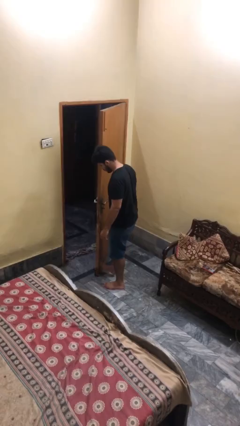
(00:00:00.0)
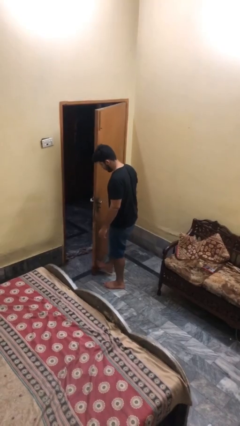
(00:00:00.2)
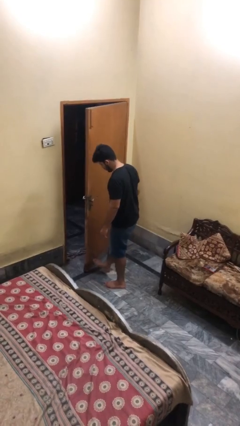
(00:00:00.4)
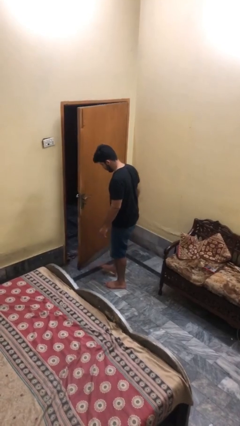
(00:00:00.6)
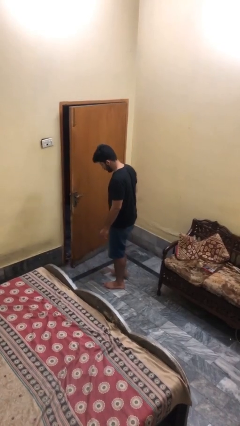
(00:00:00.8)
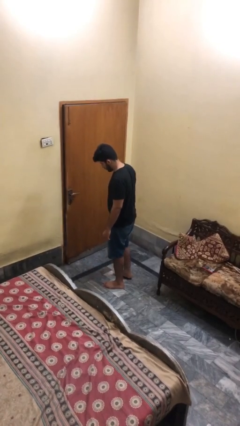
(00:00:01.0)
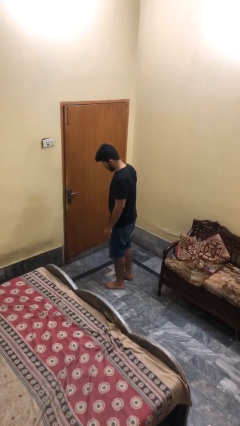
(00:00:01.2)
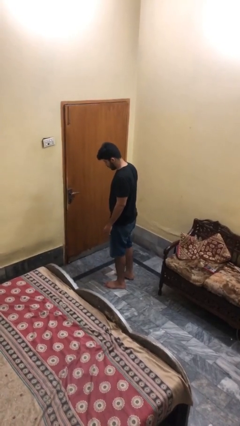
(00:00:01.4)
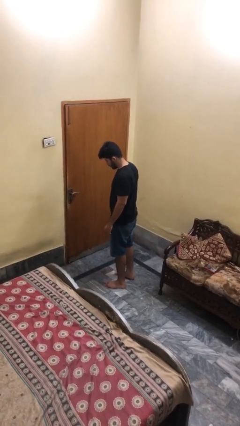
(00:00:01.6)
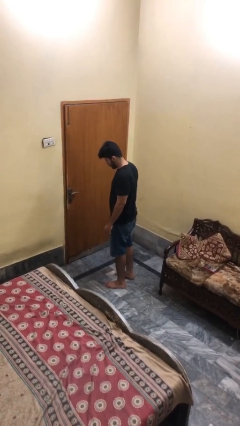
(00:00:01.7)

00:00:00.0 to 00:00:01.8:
person closes door with foot

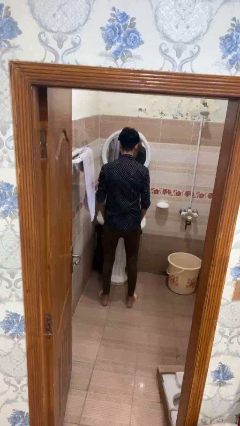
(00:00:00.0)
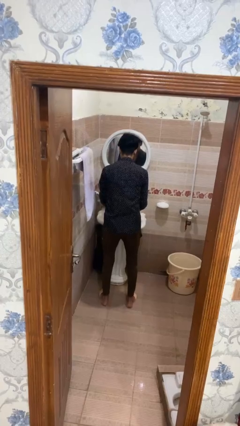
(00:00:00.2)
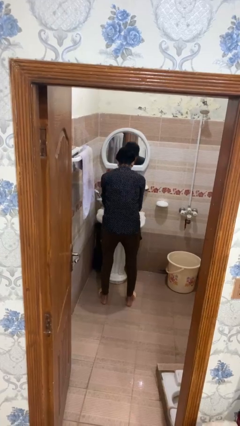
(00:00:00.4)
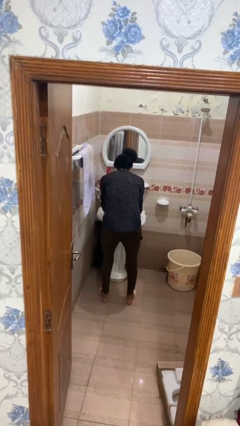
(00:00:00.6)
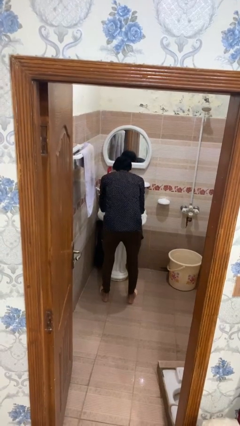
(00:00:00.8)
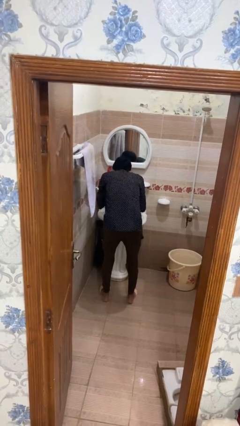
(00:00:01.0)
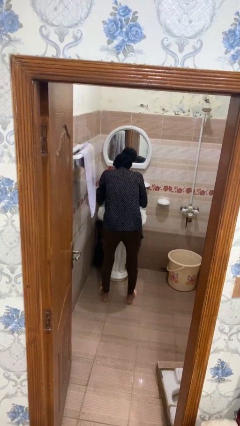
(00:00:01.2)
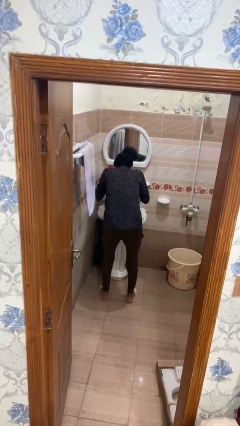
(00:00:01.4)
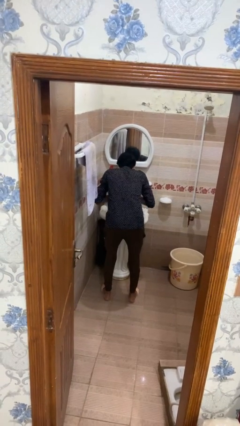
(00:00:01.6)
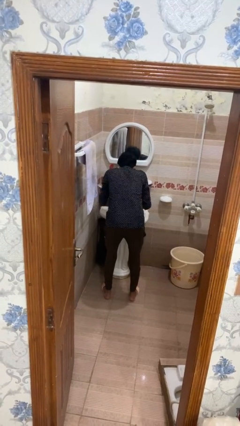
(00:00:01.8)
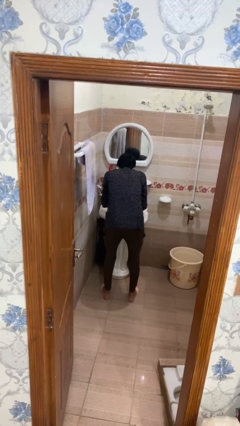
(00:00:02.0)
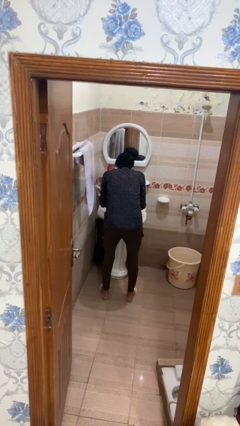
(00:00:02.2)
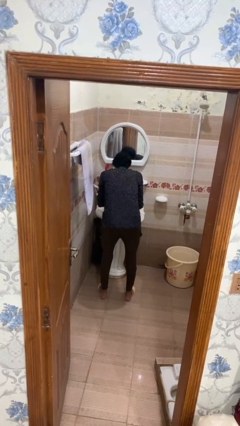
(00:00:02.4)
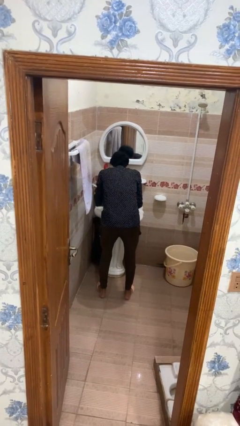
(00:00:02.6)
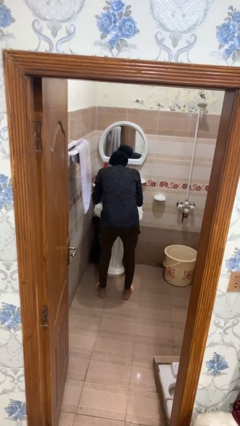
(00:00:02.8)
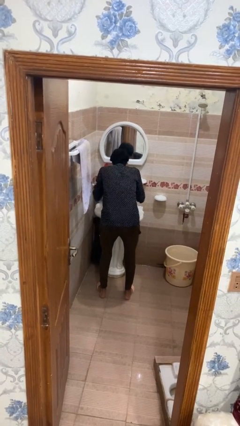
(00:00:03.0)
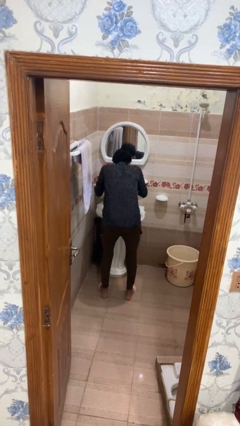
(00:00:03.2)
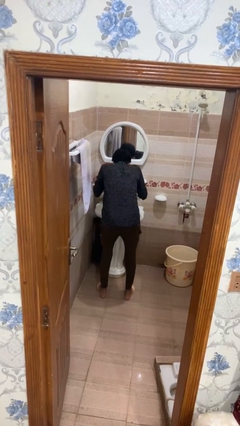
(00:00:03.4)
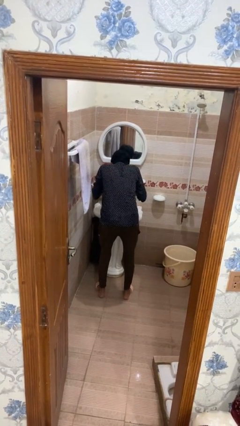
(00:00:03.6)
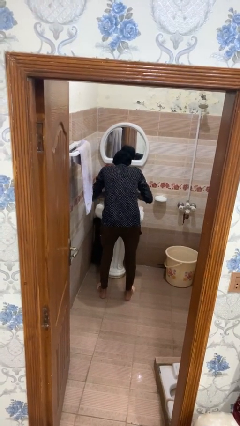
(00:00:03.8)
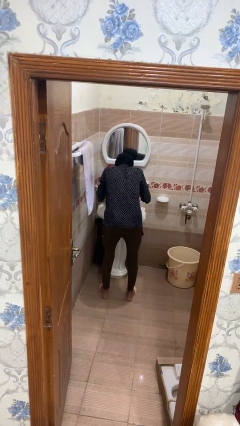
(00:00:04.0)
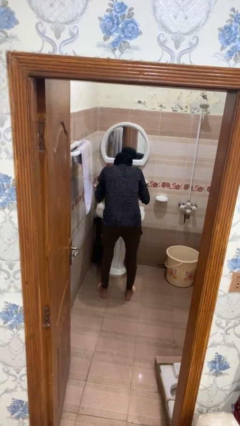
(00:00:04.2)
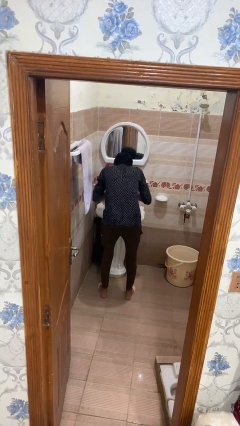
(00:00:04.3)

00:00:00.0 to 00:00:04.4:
person washes face

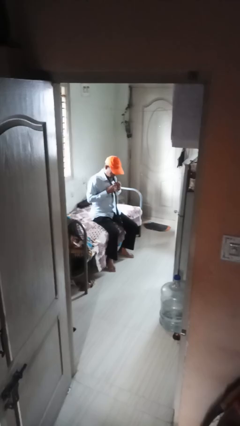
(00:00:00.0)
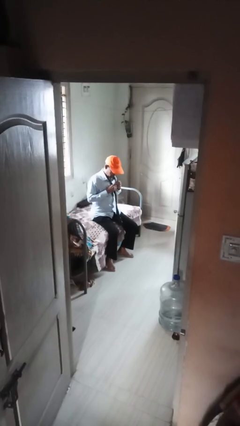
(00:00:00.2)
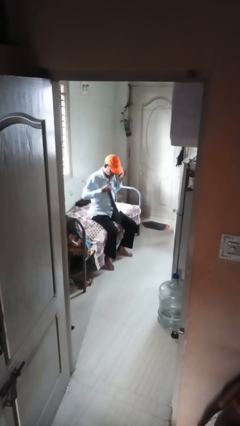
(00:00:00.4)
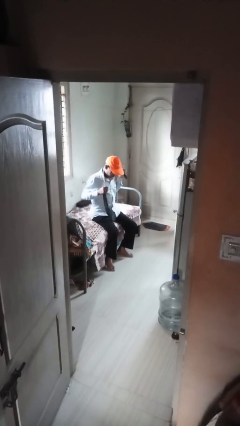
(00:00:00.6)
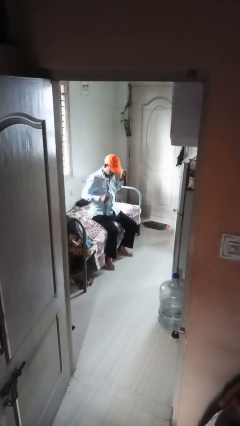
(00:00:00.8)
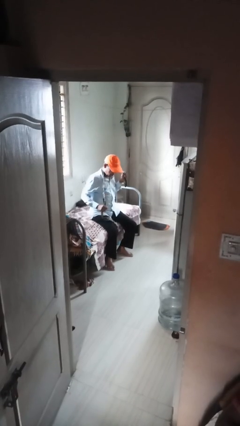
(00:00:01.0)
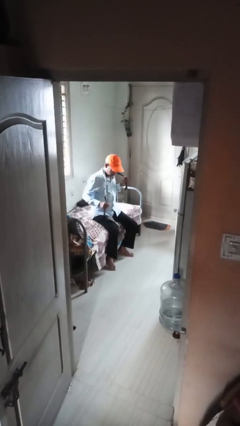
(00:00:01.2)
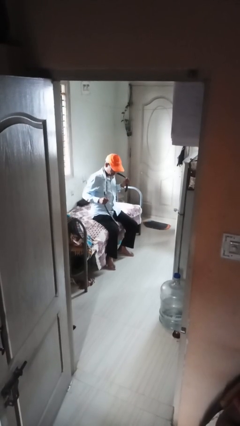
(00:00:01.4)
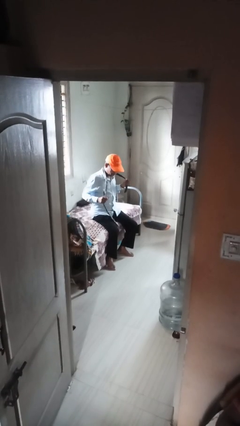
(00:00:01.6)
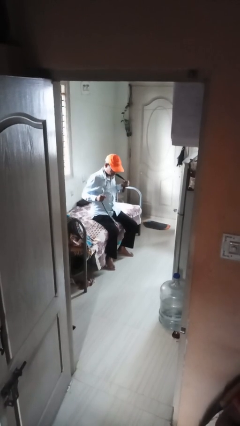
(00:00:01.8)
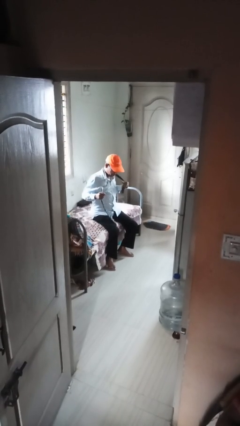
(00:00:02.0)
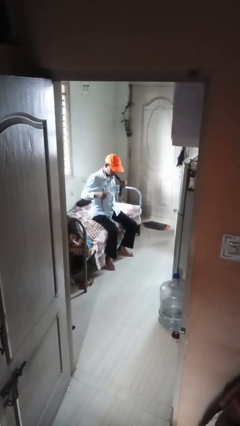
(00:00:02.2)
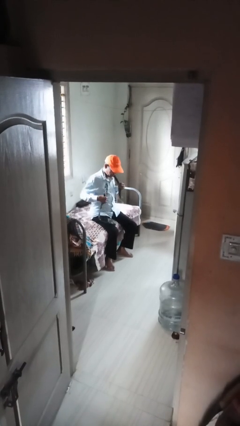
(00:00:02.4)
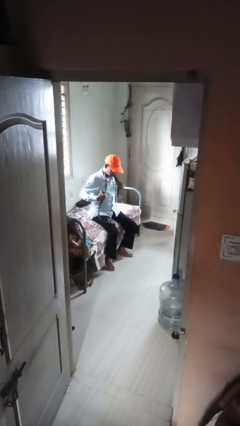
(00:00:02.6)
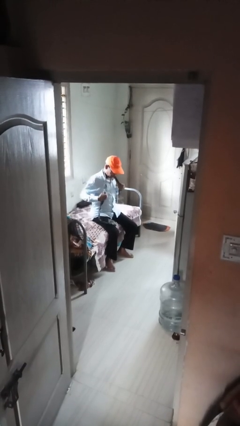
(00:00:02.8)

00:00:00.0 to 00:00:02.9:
person takes off necktie

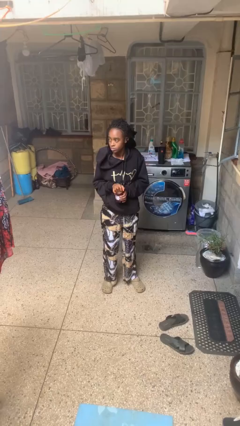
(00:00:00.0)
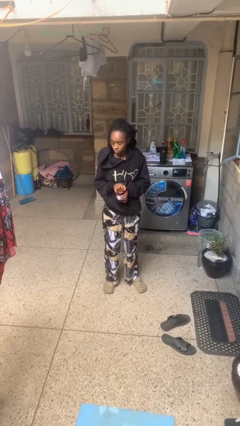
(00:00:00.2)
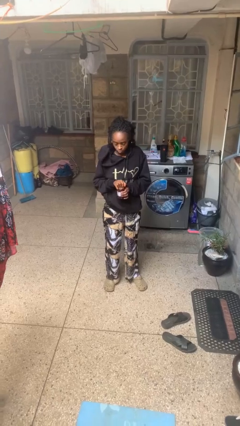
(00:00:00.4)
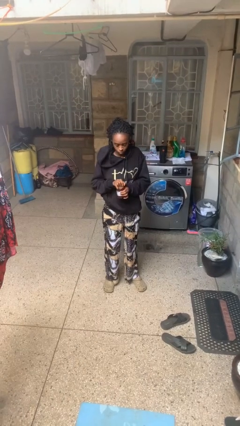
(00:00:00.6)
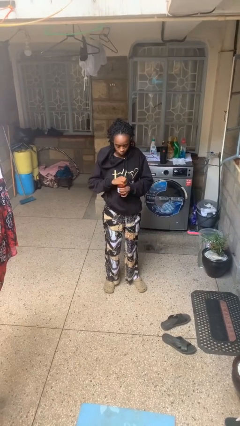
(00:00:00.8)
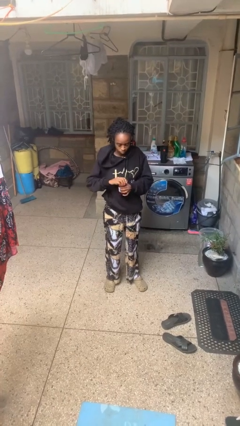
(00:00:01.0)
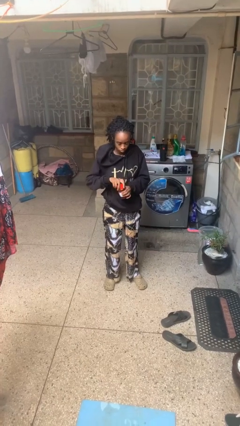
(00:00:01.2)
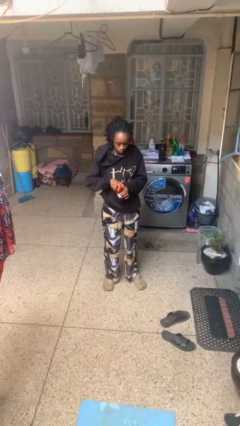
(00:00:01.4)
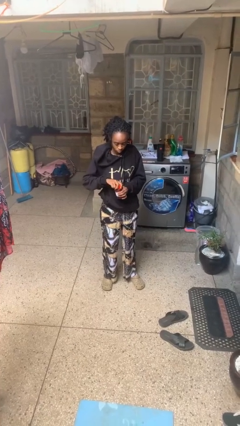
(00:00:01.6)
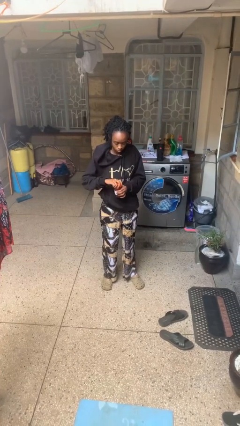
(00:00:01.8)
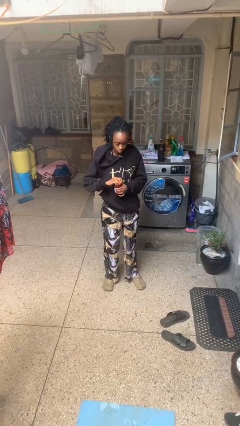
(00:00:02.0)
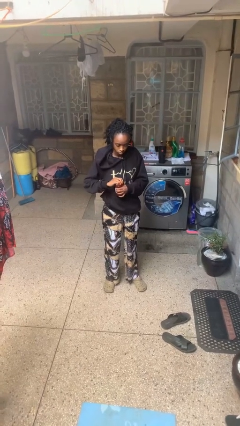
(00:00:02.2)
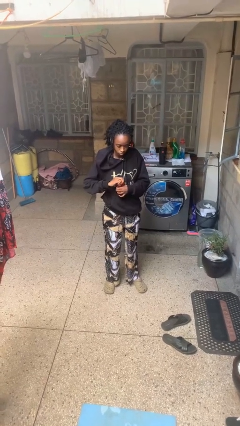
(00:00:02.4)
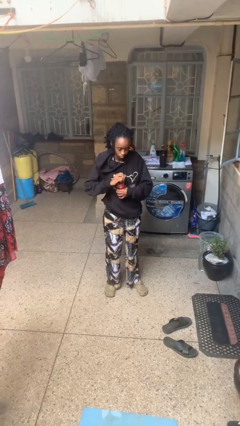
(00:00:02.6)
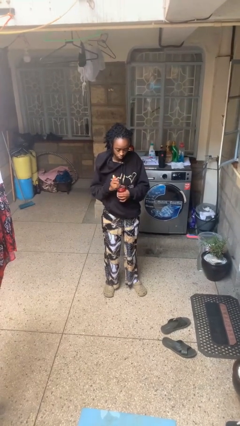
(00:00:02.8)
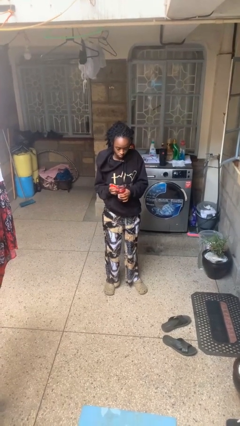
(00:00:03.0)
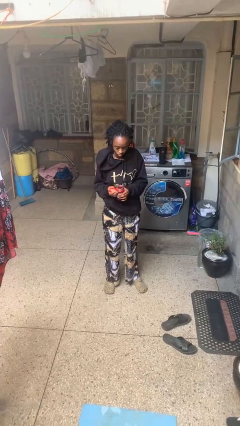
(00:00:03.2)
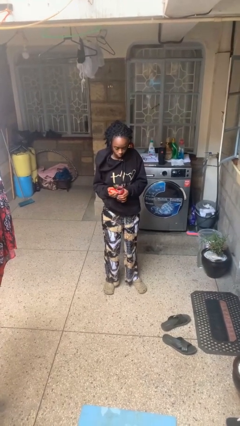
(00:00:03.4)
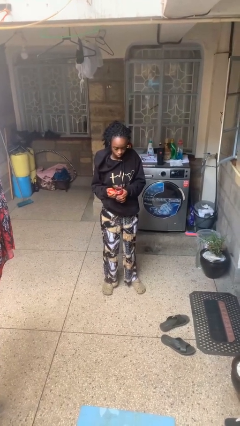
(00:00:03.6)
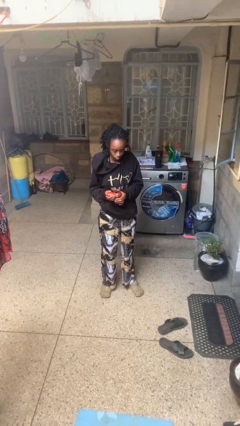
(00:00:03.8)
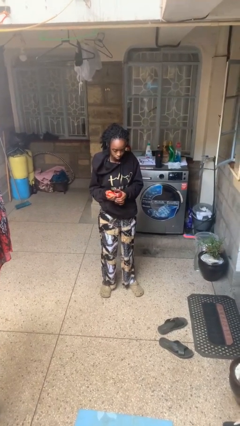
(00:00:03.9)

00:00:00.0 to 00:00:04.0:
person opens jar

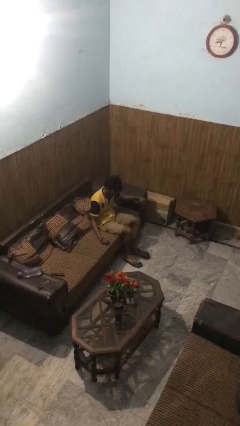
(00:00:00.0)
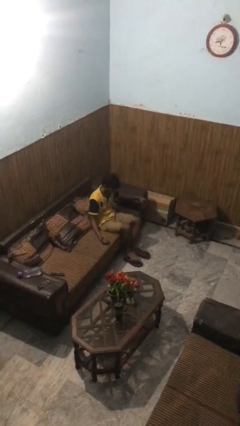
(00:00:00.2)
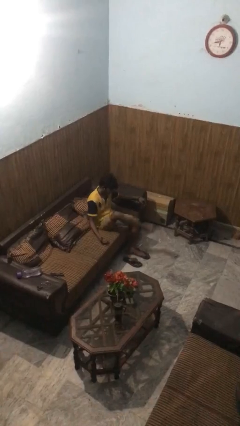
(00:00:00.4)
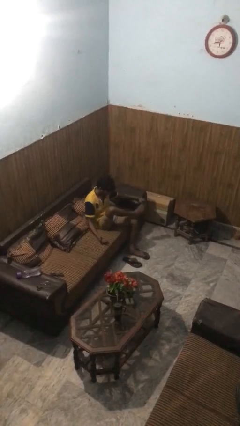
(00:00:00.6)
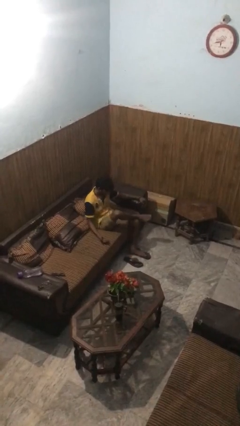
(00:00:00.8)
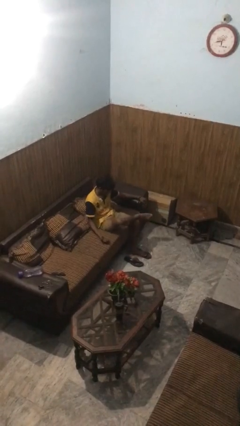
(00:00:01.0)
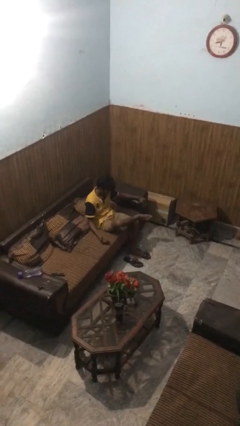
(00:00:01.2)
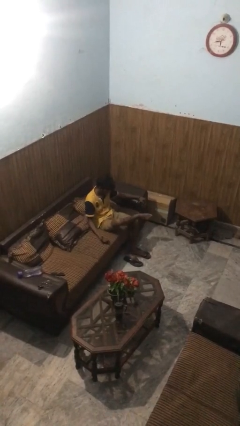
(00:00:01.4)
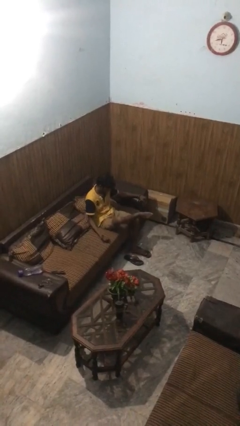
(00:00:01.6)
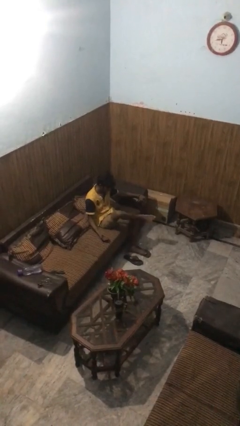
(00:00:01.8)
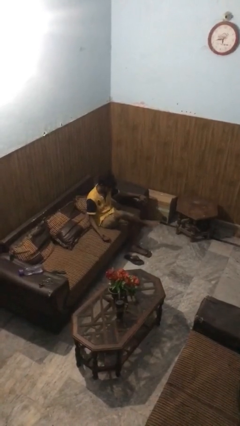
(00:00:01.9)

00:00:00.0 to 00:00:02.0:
person crosses legs

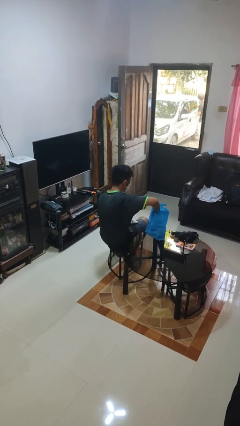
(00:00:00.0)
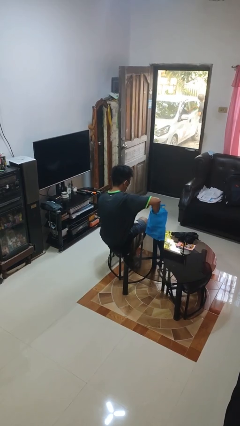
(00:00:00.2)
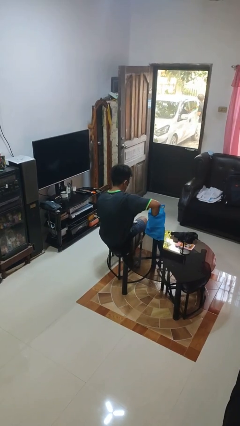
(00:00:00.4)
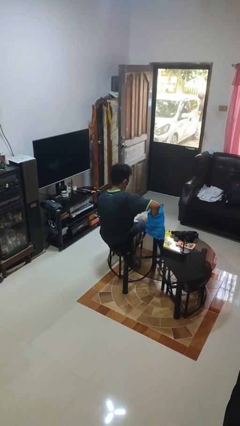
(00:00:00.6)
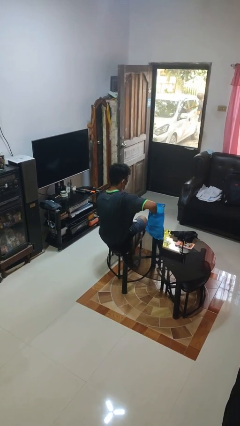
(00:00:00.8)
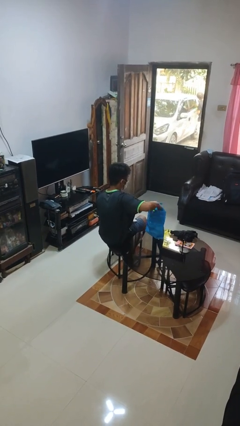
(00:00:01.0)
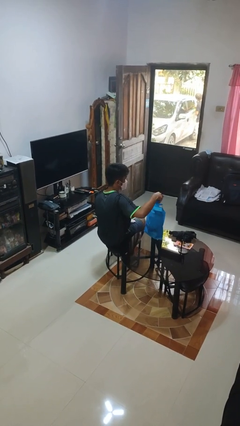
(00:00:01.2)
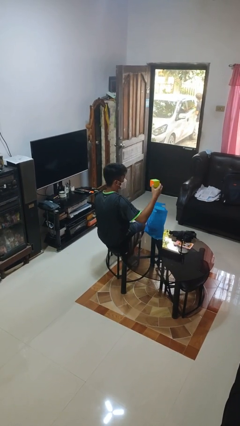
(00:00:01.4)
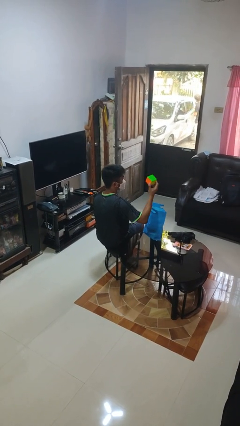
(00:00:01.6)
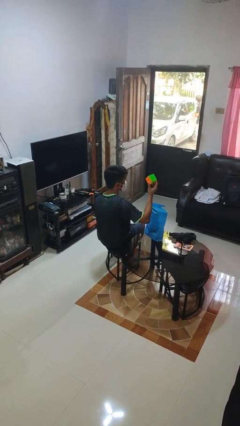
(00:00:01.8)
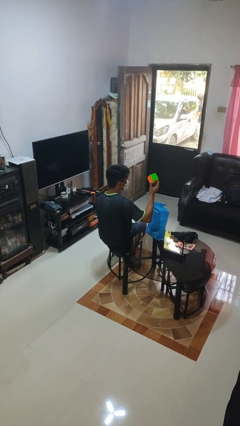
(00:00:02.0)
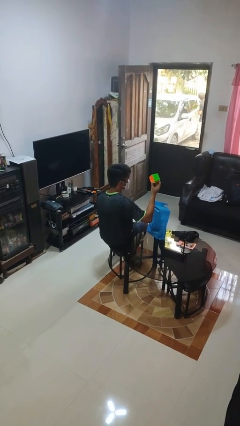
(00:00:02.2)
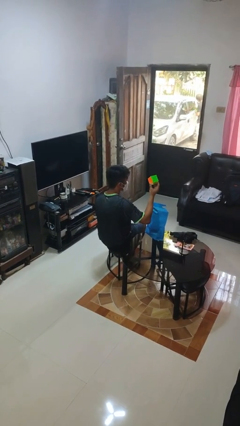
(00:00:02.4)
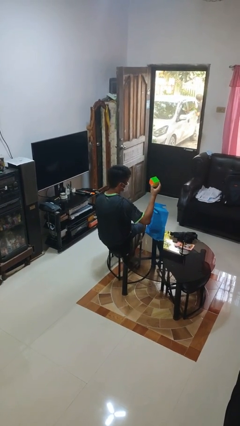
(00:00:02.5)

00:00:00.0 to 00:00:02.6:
person takes object from bag
